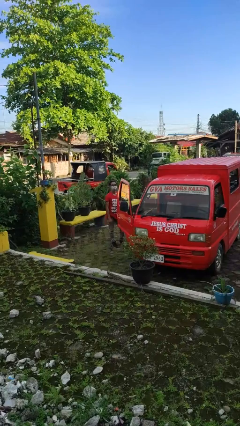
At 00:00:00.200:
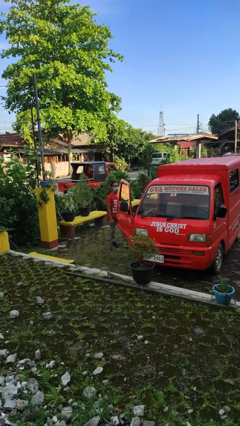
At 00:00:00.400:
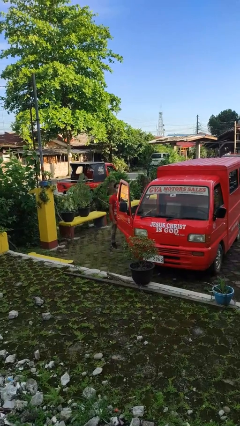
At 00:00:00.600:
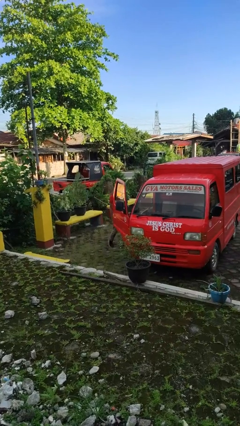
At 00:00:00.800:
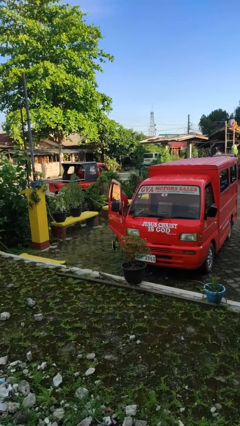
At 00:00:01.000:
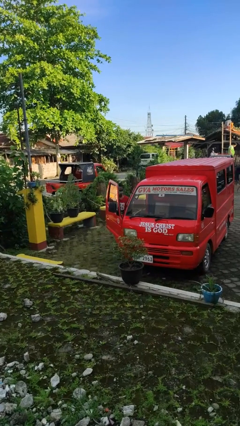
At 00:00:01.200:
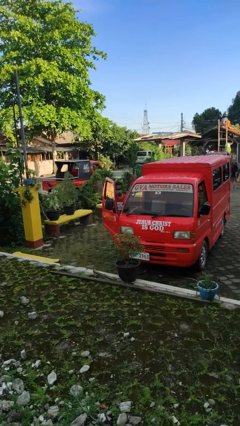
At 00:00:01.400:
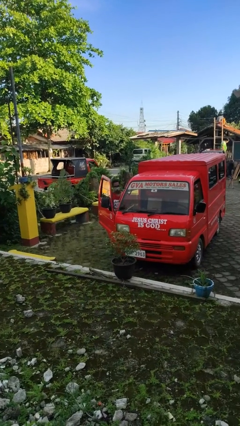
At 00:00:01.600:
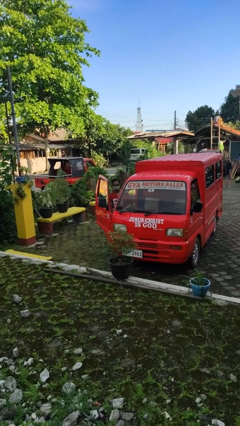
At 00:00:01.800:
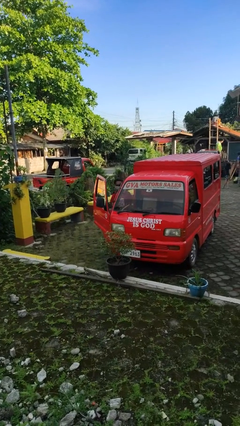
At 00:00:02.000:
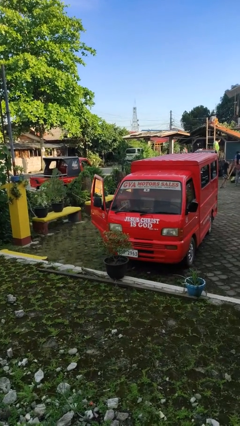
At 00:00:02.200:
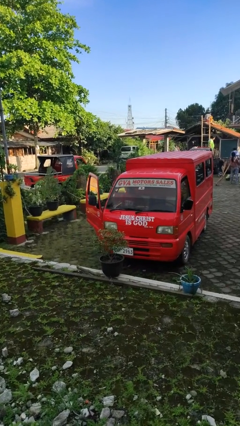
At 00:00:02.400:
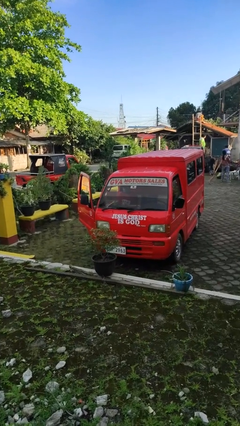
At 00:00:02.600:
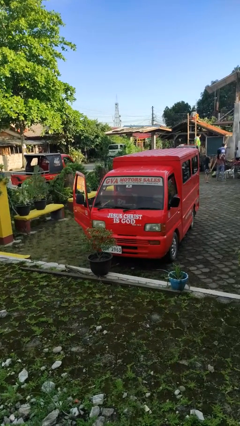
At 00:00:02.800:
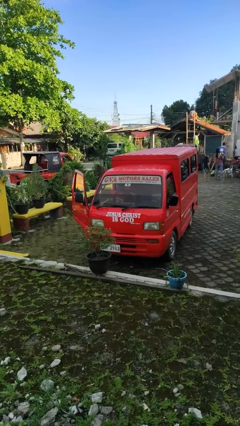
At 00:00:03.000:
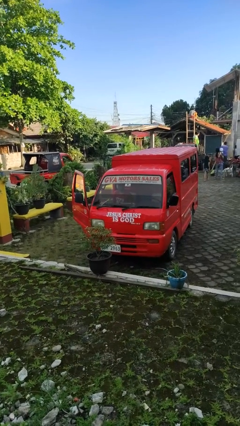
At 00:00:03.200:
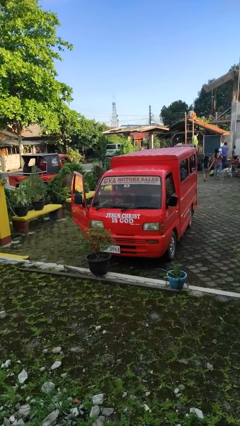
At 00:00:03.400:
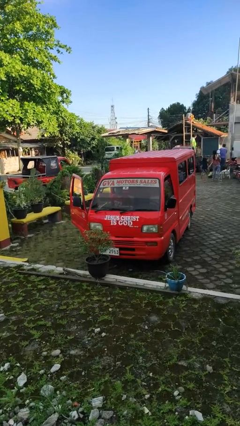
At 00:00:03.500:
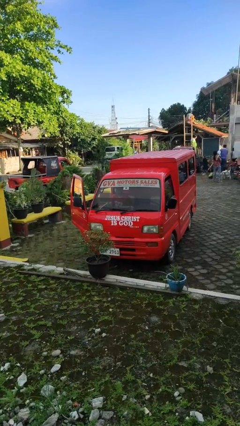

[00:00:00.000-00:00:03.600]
person enters car

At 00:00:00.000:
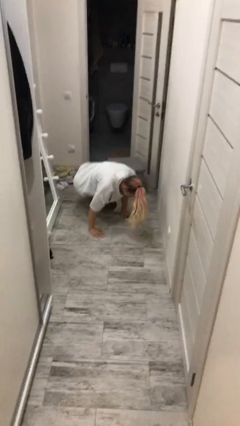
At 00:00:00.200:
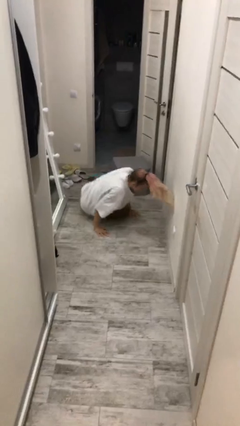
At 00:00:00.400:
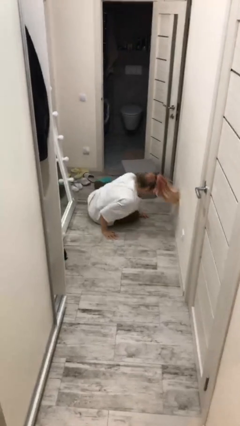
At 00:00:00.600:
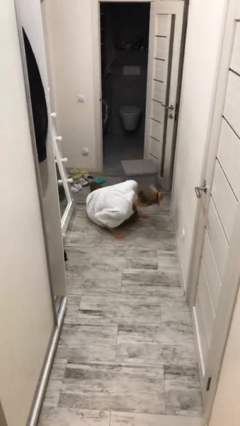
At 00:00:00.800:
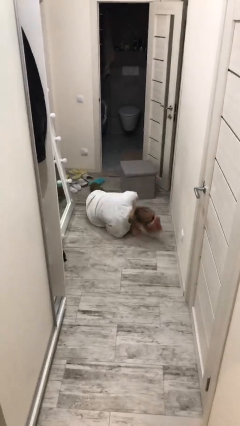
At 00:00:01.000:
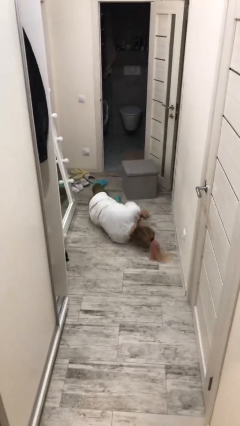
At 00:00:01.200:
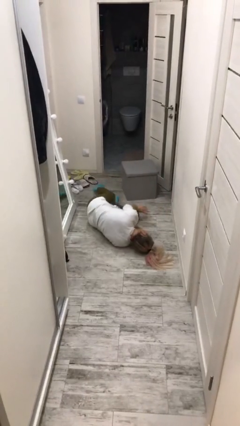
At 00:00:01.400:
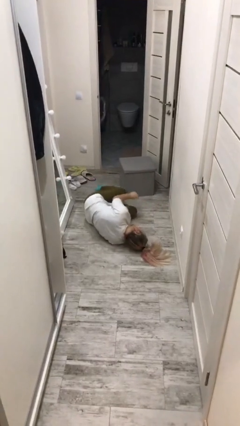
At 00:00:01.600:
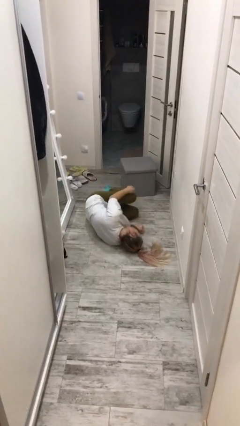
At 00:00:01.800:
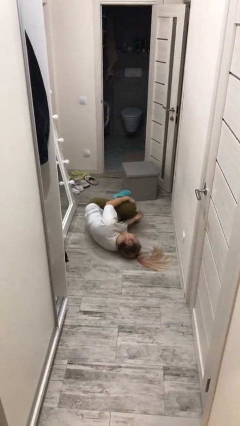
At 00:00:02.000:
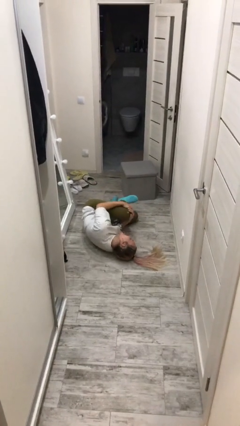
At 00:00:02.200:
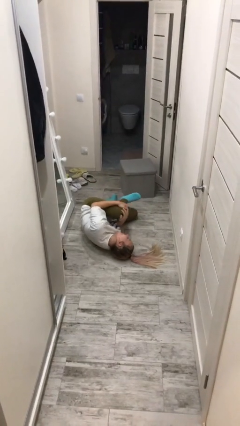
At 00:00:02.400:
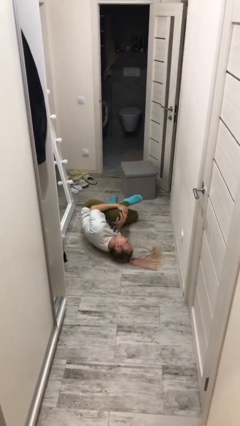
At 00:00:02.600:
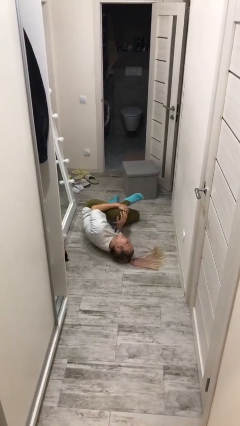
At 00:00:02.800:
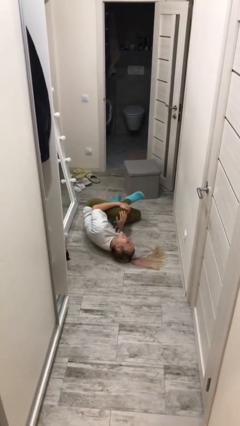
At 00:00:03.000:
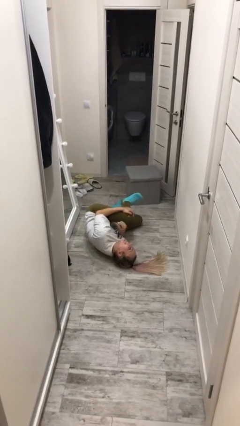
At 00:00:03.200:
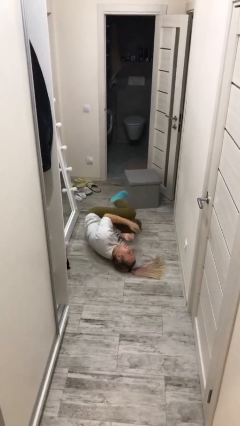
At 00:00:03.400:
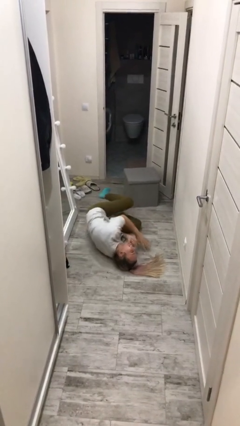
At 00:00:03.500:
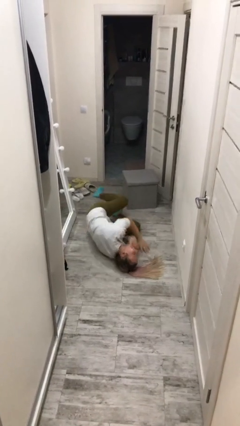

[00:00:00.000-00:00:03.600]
person lies down on floor

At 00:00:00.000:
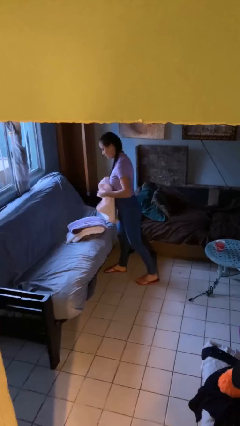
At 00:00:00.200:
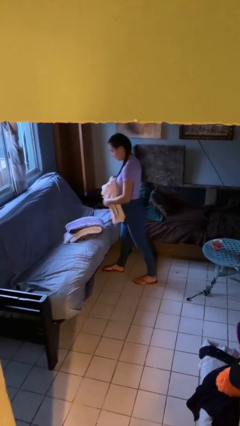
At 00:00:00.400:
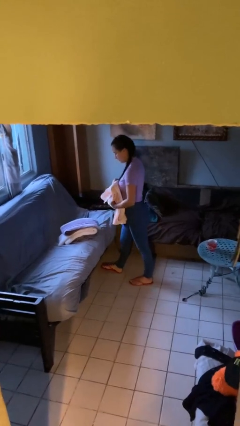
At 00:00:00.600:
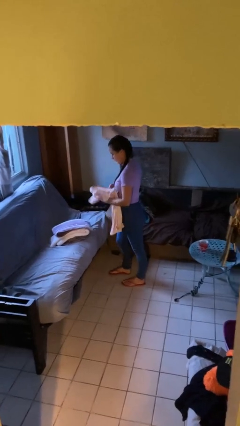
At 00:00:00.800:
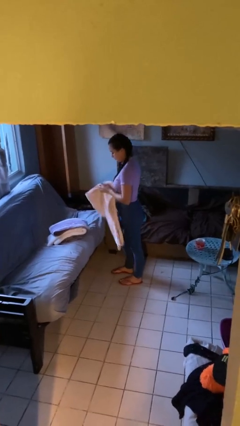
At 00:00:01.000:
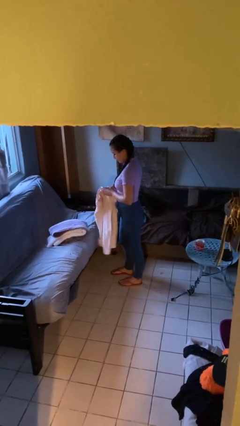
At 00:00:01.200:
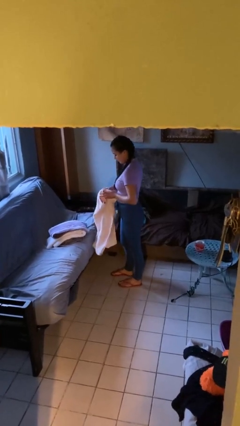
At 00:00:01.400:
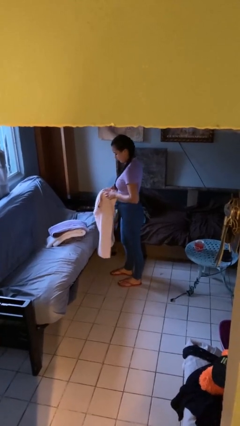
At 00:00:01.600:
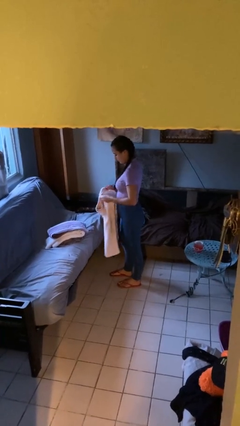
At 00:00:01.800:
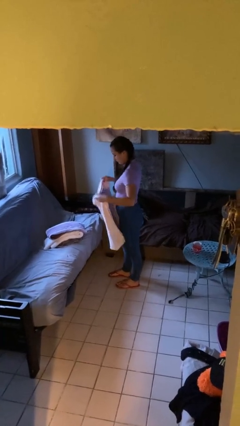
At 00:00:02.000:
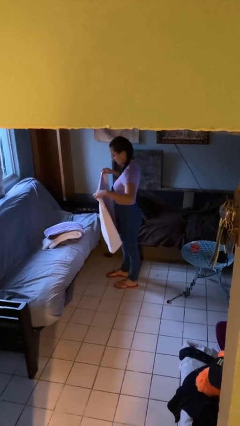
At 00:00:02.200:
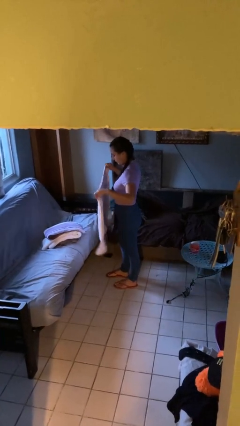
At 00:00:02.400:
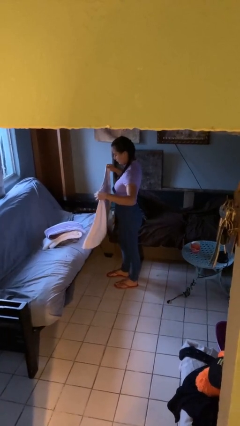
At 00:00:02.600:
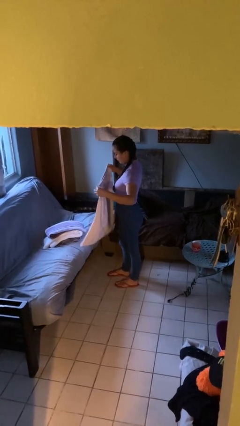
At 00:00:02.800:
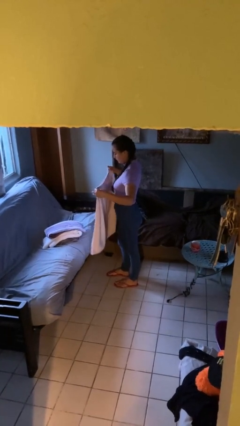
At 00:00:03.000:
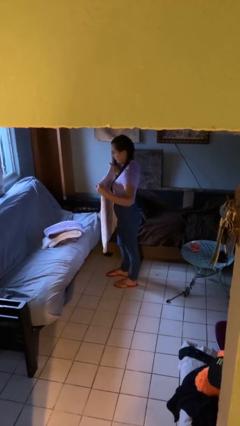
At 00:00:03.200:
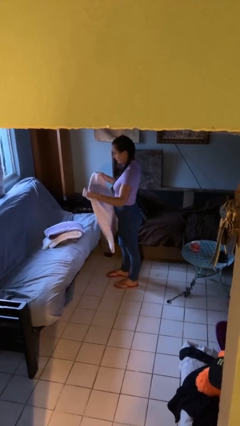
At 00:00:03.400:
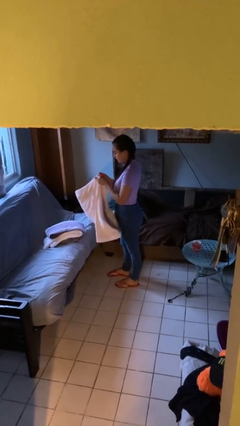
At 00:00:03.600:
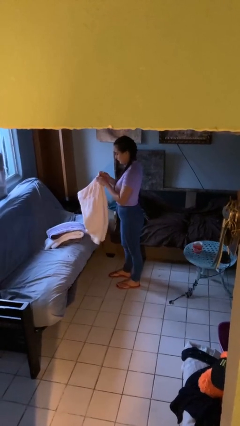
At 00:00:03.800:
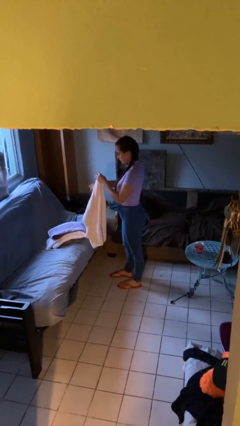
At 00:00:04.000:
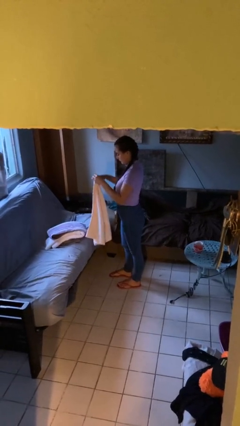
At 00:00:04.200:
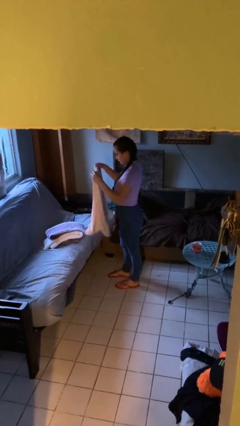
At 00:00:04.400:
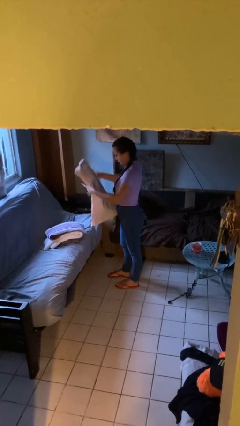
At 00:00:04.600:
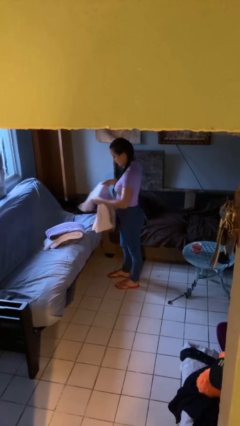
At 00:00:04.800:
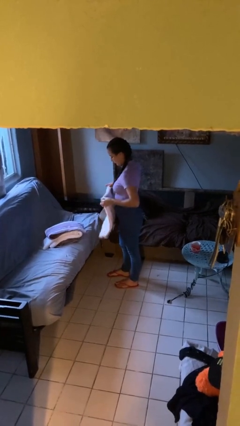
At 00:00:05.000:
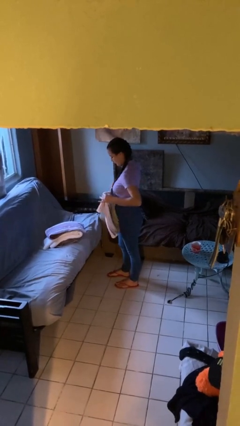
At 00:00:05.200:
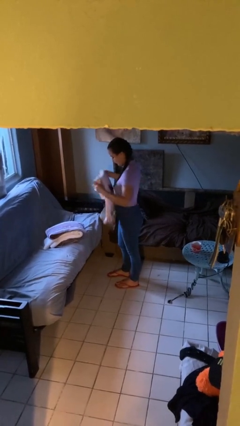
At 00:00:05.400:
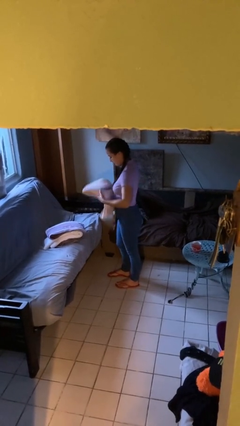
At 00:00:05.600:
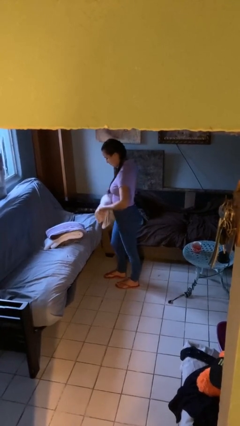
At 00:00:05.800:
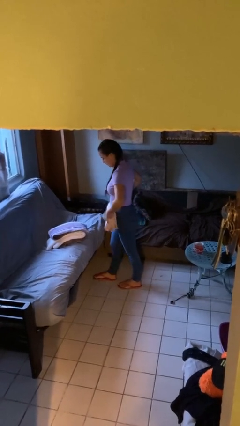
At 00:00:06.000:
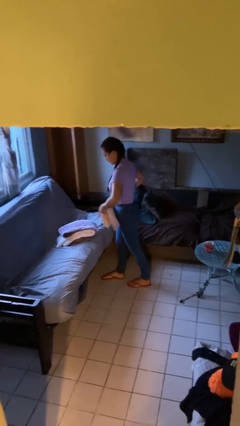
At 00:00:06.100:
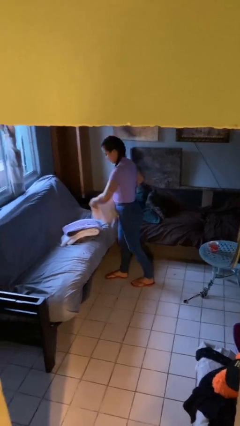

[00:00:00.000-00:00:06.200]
person folds towel

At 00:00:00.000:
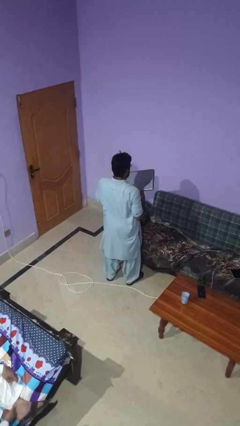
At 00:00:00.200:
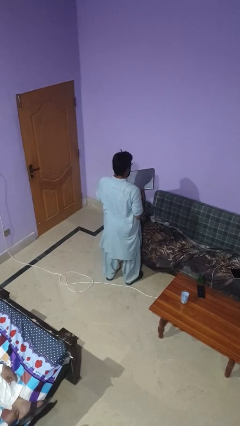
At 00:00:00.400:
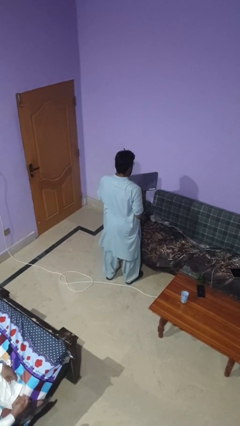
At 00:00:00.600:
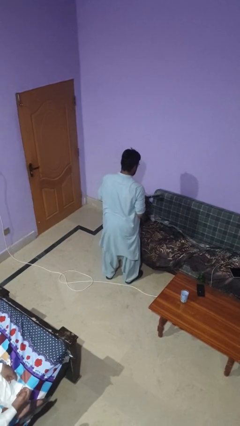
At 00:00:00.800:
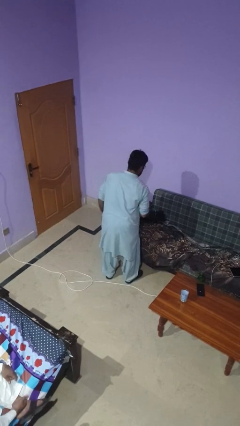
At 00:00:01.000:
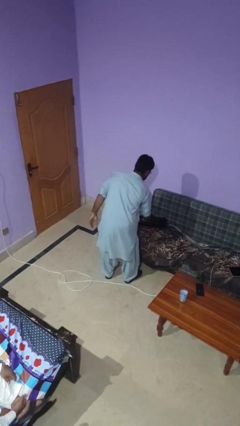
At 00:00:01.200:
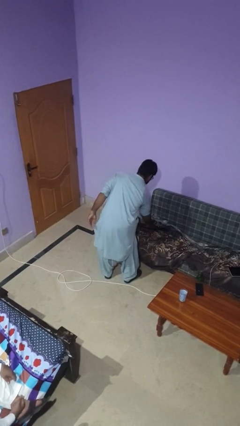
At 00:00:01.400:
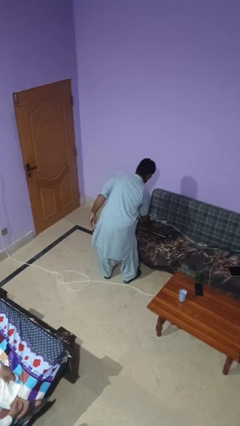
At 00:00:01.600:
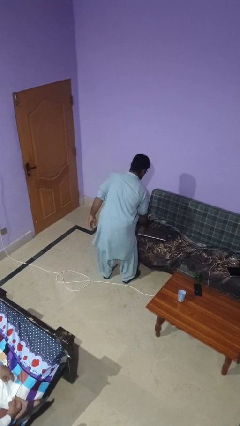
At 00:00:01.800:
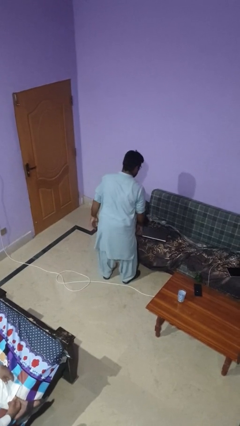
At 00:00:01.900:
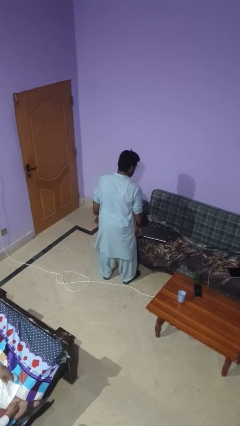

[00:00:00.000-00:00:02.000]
person puts down object on couch

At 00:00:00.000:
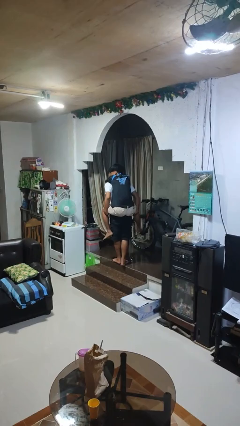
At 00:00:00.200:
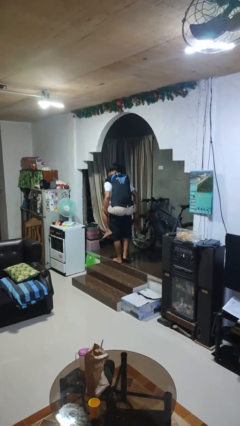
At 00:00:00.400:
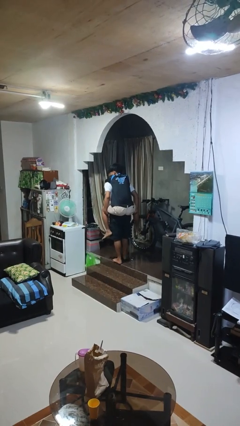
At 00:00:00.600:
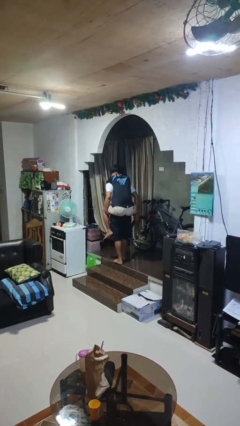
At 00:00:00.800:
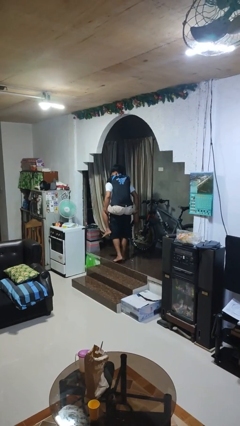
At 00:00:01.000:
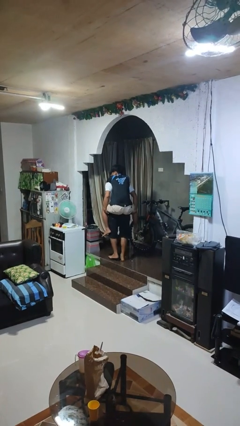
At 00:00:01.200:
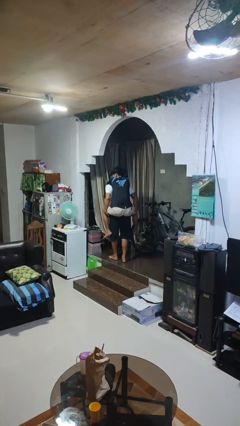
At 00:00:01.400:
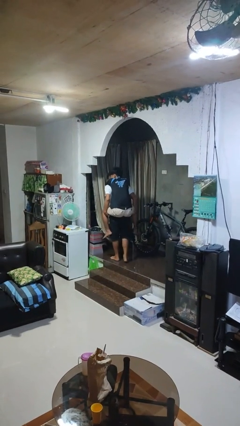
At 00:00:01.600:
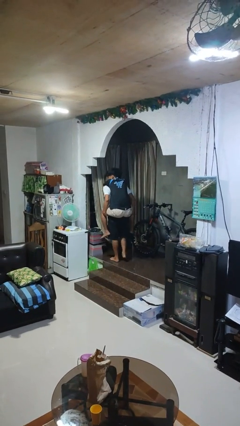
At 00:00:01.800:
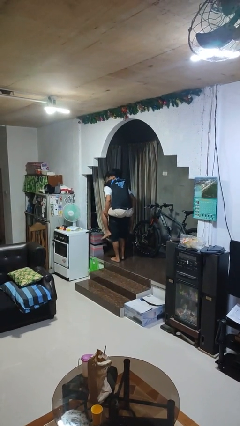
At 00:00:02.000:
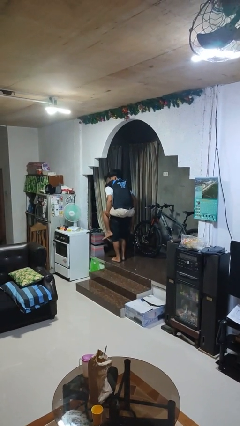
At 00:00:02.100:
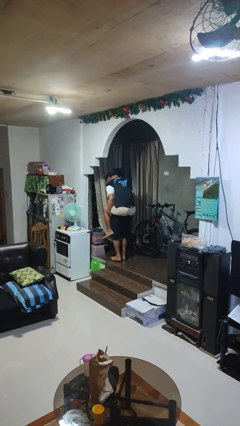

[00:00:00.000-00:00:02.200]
person carries person on back
